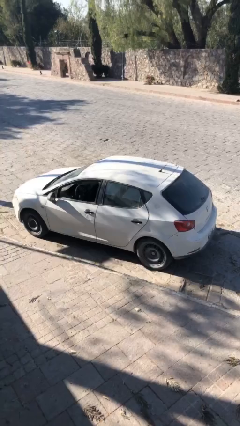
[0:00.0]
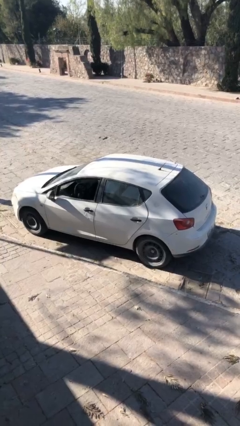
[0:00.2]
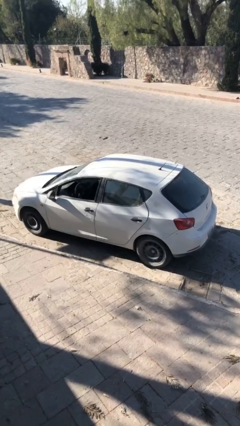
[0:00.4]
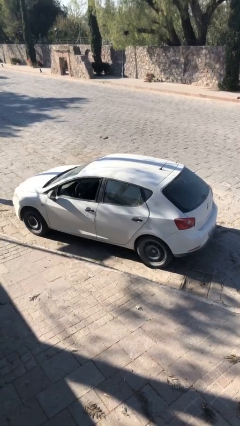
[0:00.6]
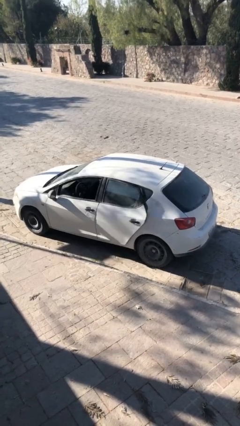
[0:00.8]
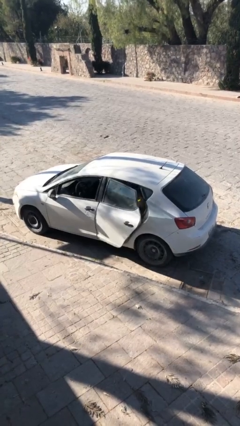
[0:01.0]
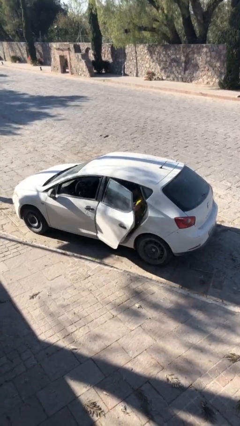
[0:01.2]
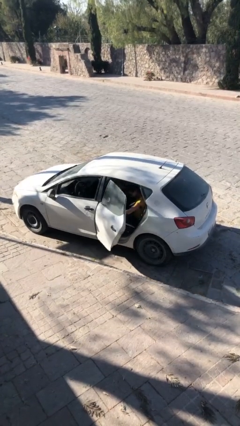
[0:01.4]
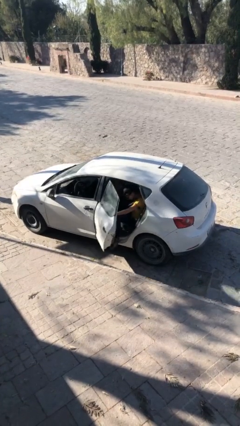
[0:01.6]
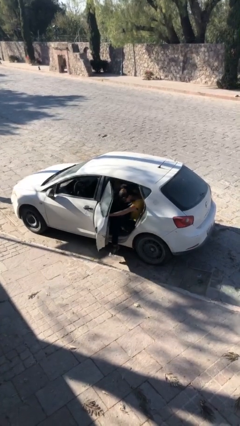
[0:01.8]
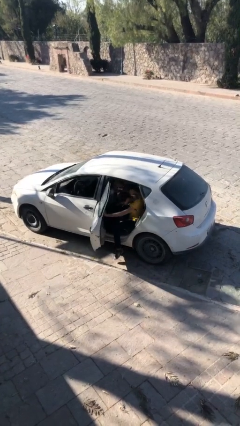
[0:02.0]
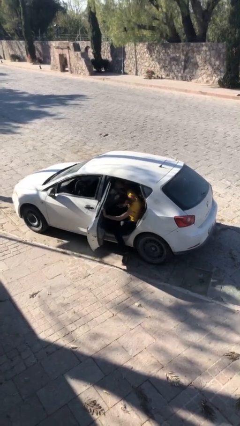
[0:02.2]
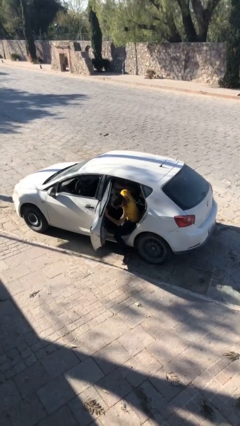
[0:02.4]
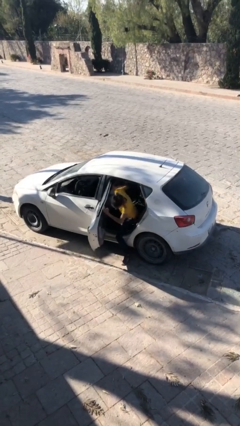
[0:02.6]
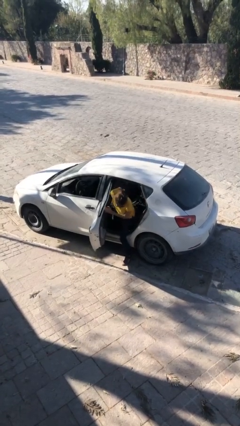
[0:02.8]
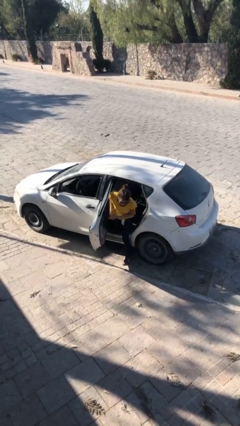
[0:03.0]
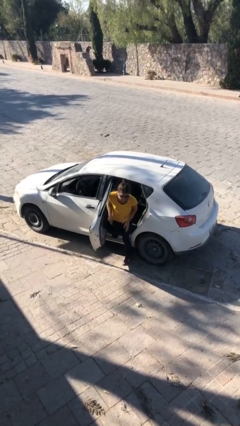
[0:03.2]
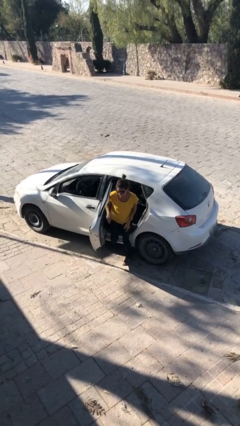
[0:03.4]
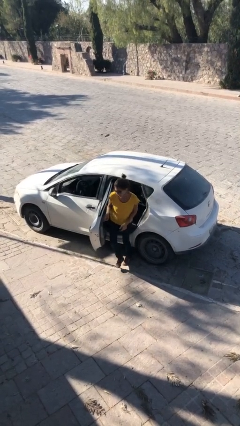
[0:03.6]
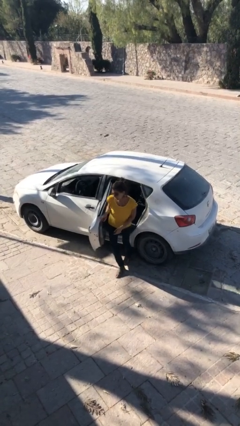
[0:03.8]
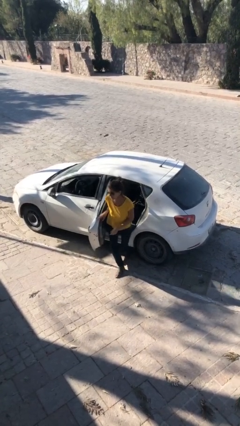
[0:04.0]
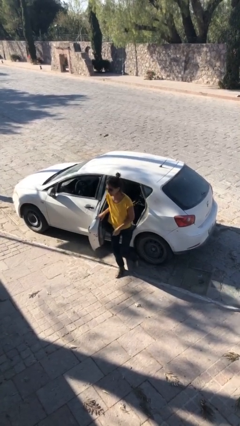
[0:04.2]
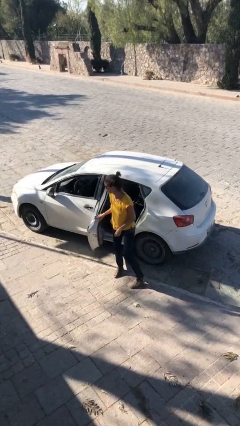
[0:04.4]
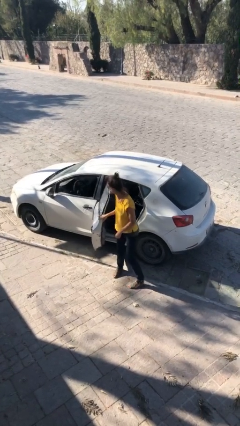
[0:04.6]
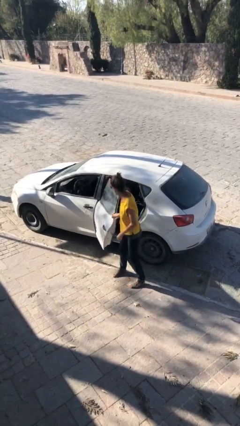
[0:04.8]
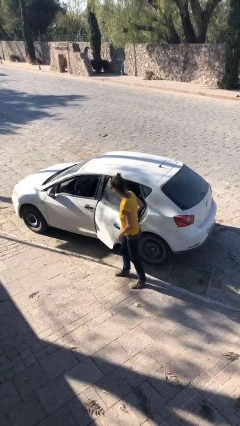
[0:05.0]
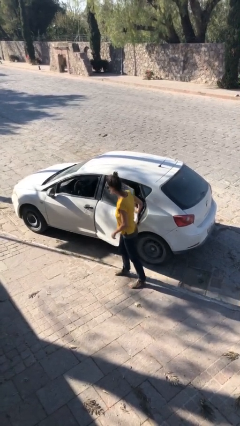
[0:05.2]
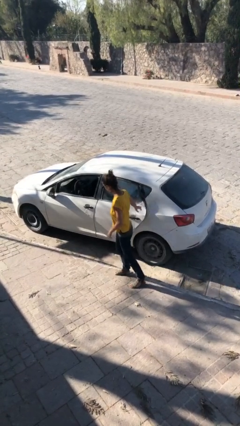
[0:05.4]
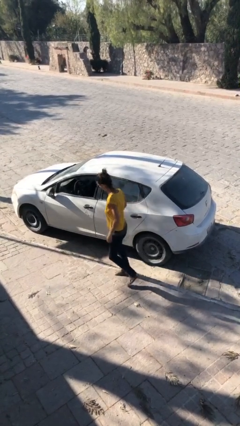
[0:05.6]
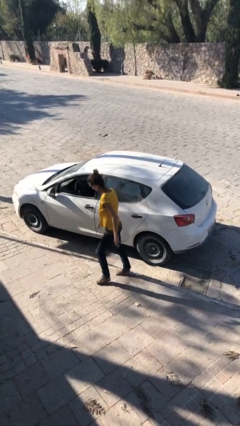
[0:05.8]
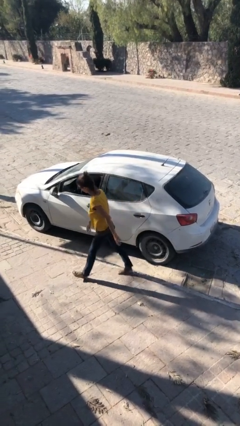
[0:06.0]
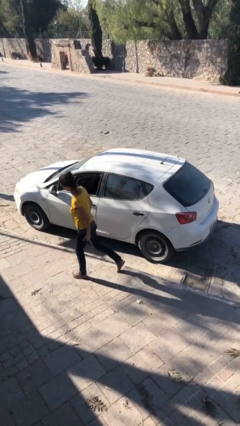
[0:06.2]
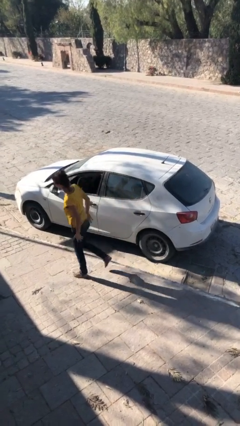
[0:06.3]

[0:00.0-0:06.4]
car drops off person

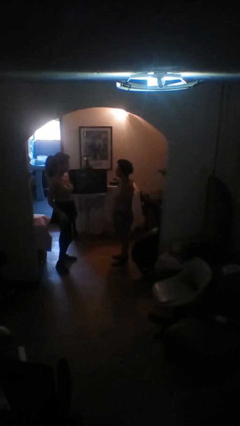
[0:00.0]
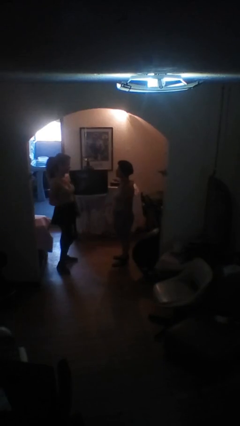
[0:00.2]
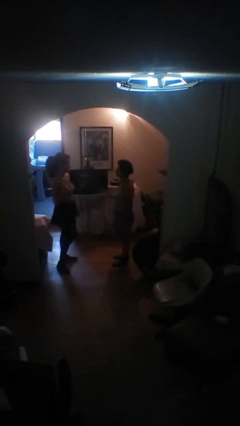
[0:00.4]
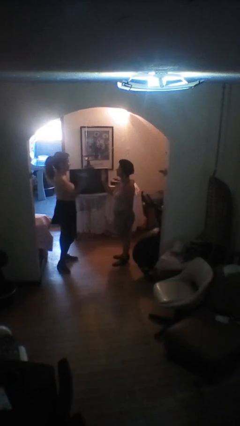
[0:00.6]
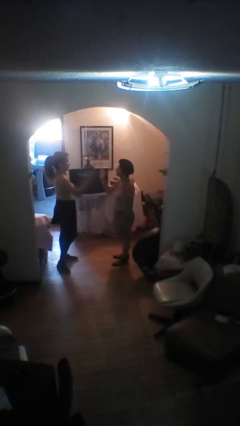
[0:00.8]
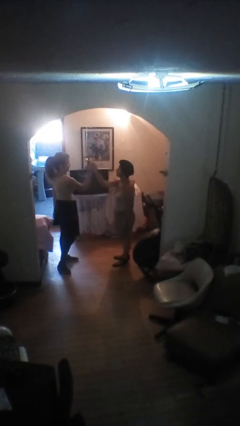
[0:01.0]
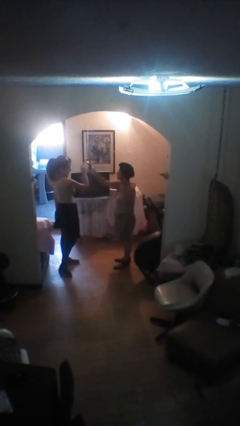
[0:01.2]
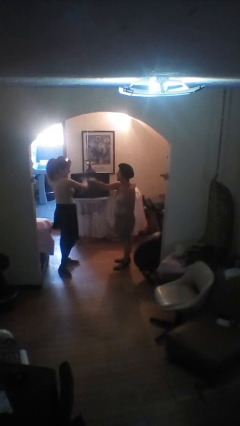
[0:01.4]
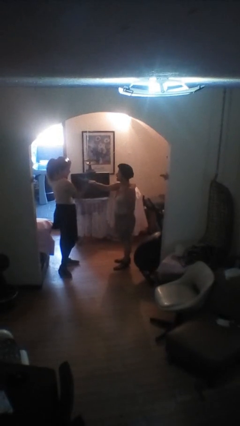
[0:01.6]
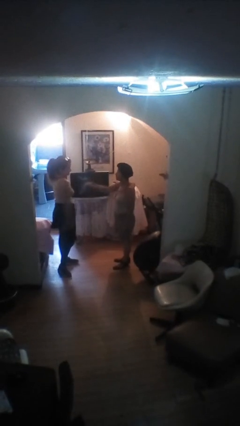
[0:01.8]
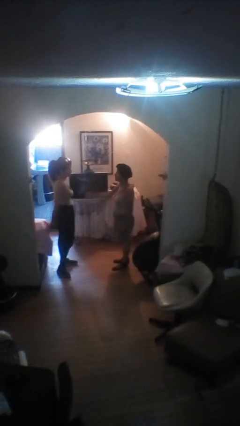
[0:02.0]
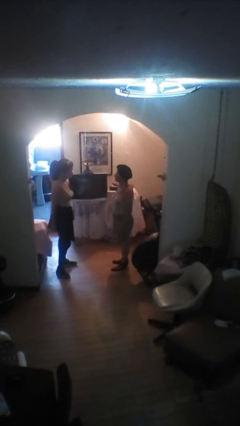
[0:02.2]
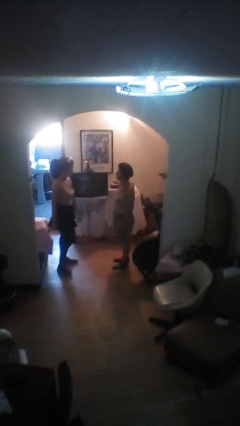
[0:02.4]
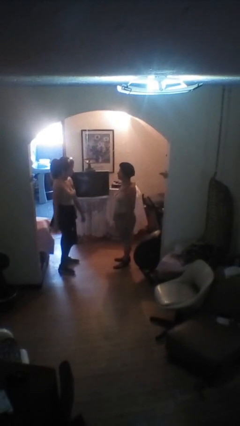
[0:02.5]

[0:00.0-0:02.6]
person highfives hand

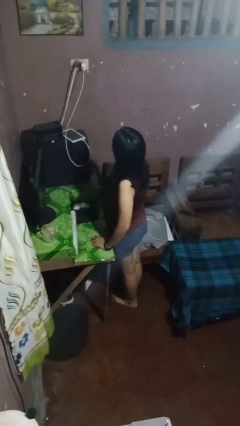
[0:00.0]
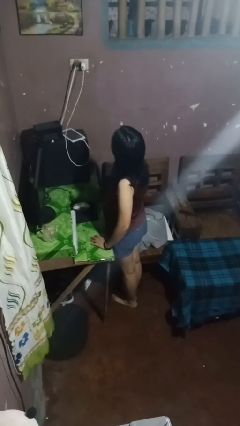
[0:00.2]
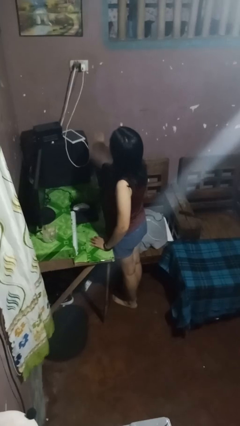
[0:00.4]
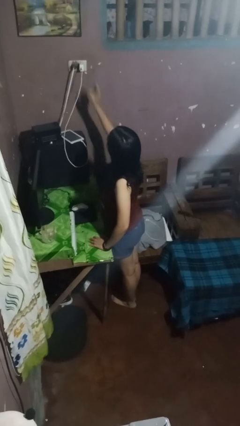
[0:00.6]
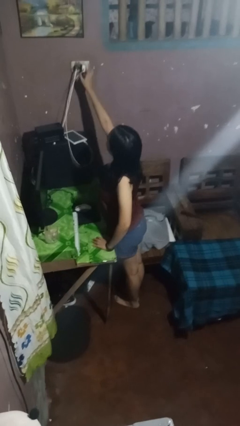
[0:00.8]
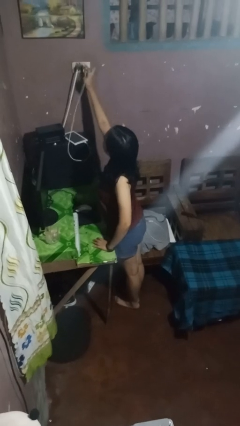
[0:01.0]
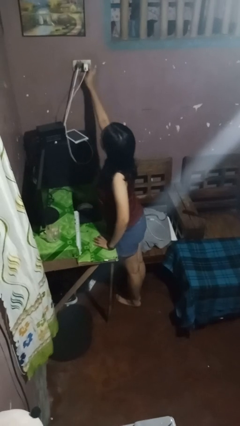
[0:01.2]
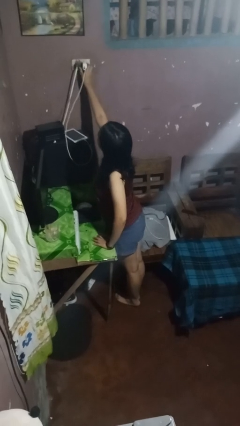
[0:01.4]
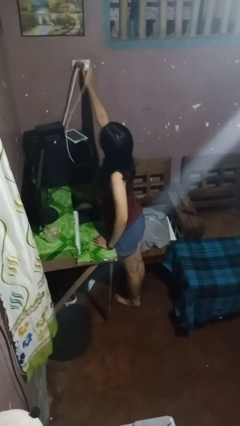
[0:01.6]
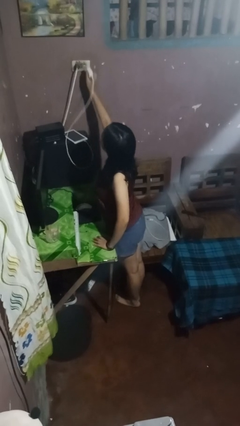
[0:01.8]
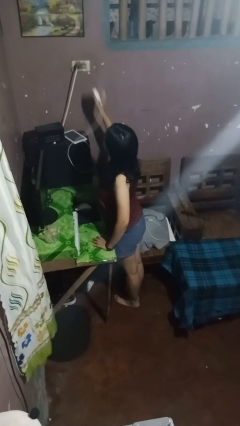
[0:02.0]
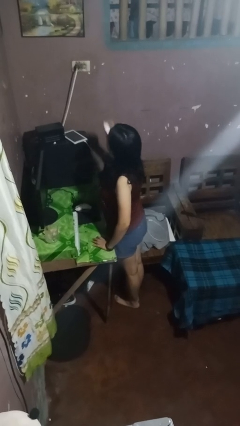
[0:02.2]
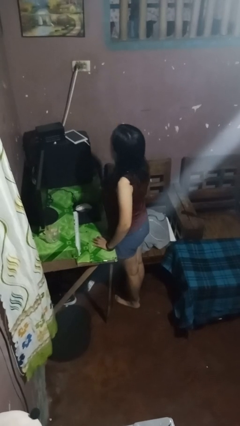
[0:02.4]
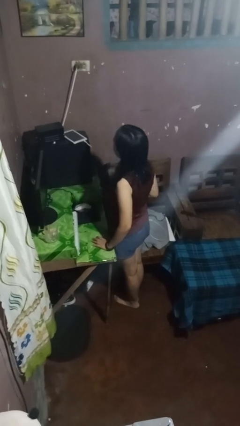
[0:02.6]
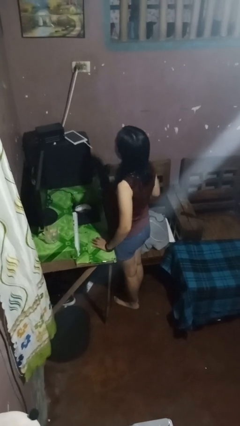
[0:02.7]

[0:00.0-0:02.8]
person unplugs from electrical socket

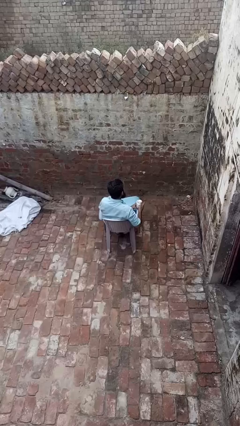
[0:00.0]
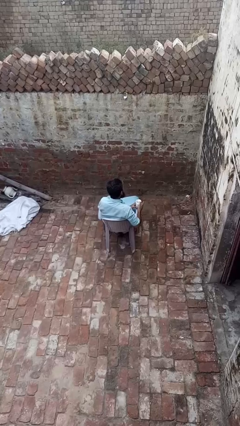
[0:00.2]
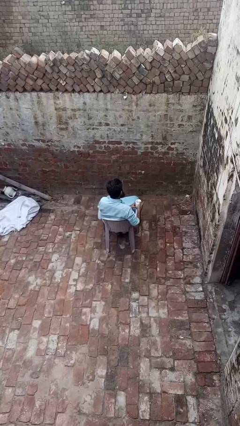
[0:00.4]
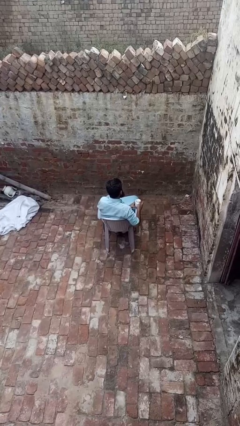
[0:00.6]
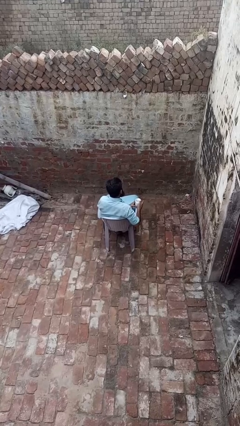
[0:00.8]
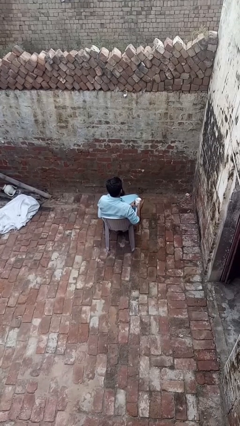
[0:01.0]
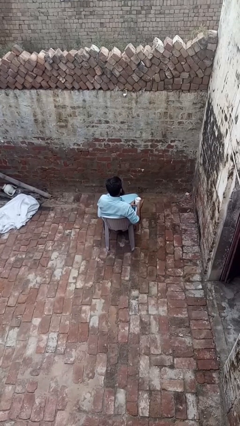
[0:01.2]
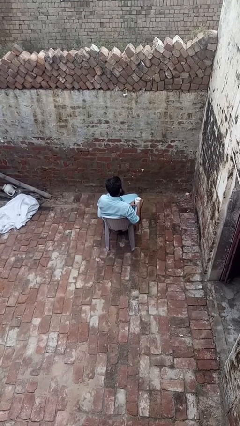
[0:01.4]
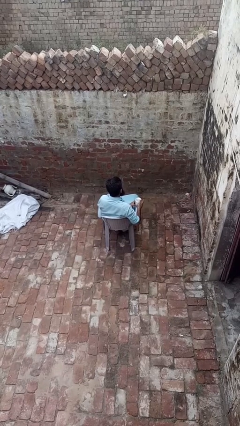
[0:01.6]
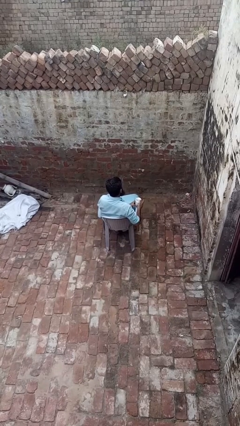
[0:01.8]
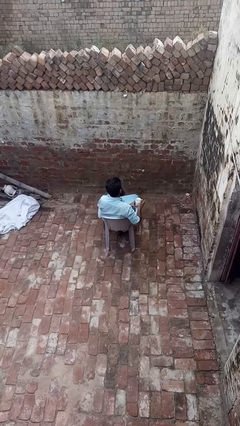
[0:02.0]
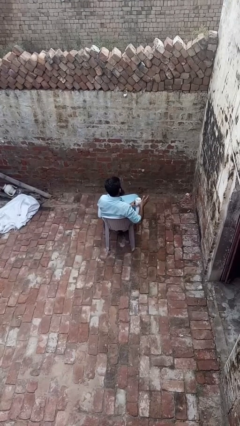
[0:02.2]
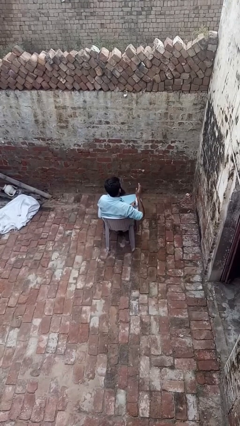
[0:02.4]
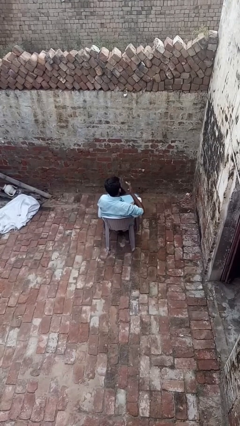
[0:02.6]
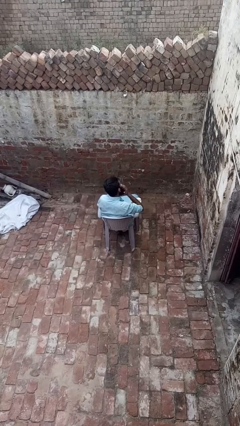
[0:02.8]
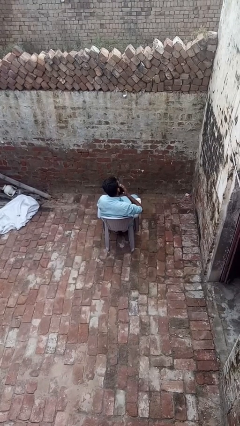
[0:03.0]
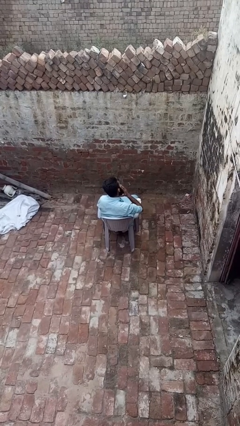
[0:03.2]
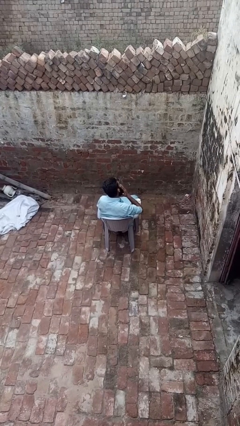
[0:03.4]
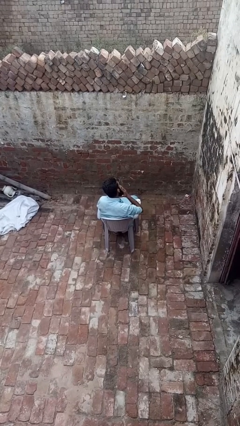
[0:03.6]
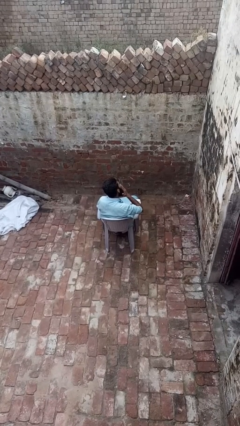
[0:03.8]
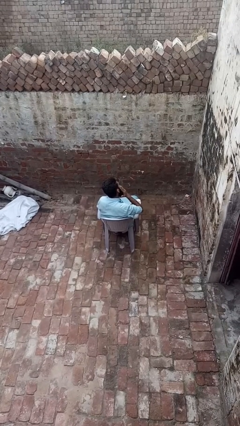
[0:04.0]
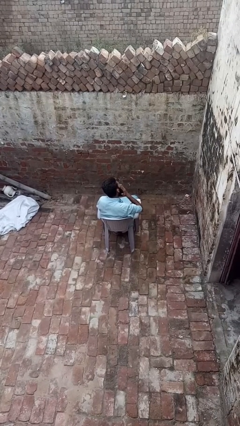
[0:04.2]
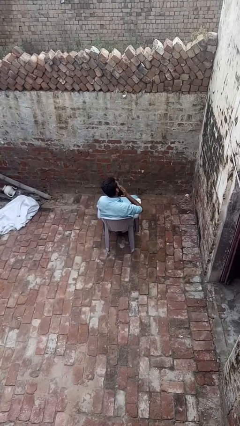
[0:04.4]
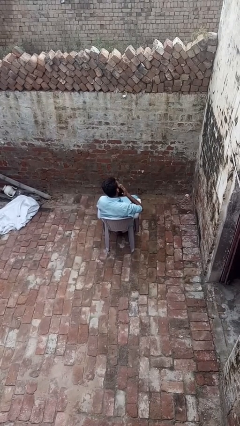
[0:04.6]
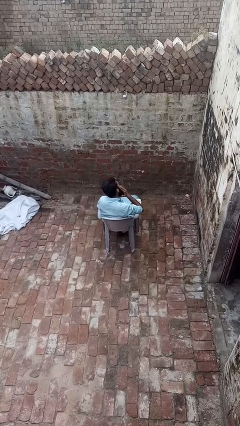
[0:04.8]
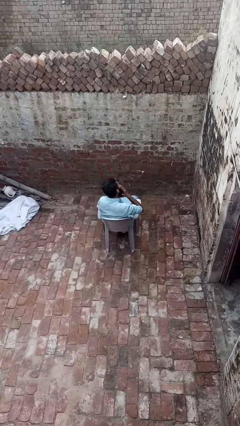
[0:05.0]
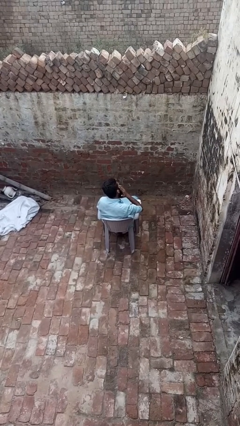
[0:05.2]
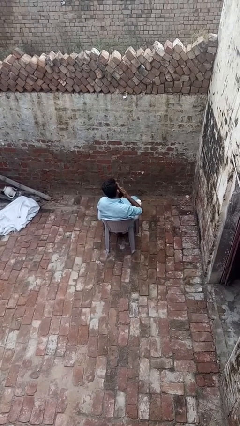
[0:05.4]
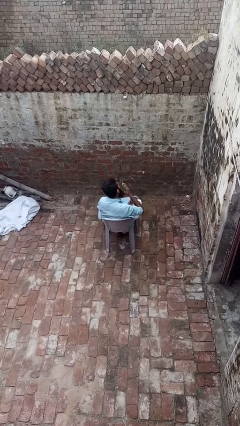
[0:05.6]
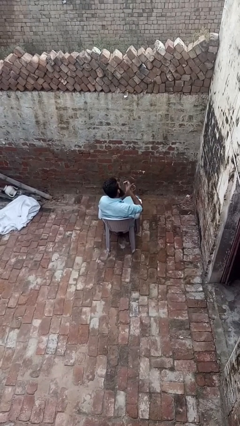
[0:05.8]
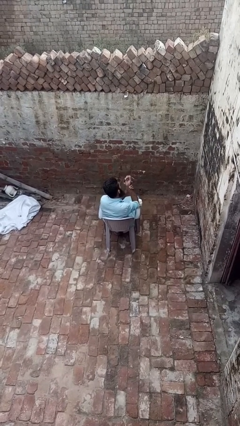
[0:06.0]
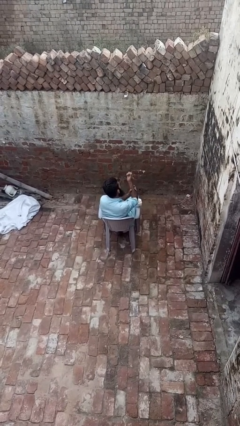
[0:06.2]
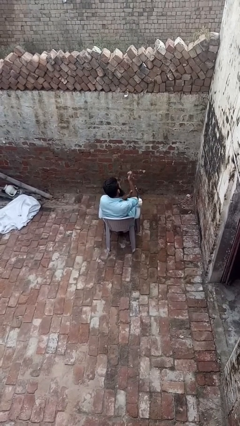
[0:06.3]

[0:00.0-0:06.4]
person applies facial moisturizer
